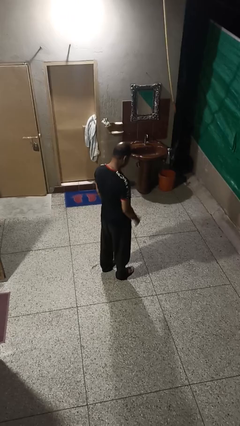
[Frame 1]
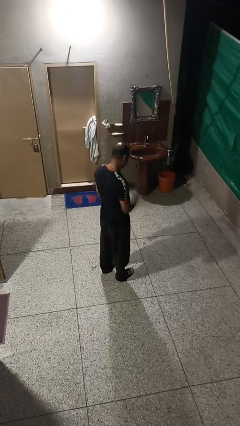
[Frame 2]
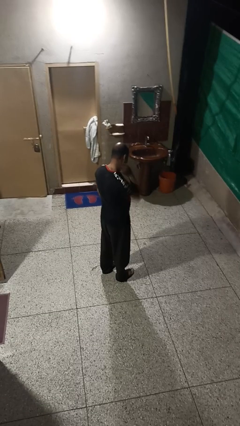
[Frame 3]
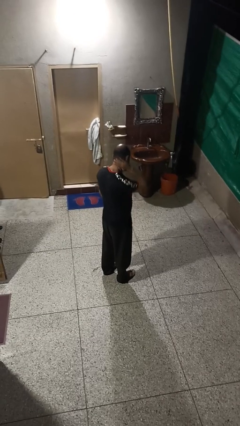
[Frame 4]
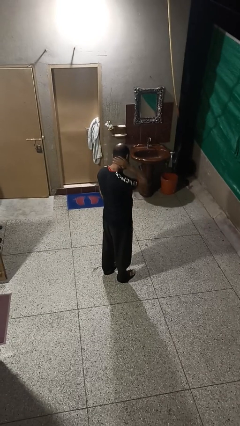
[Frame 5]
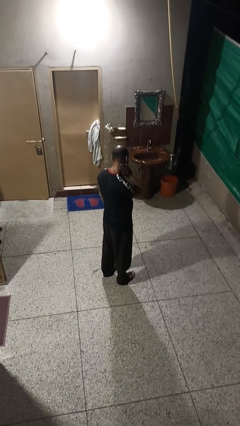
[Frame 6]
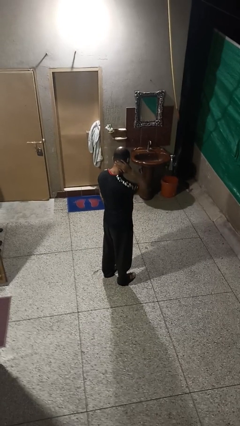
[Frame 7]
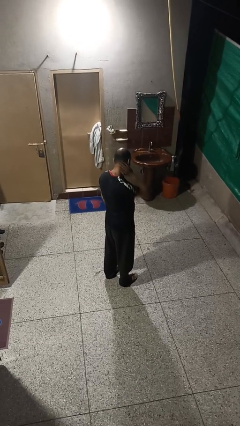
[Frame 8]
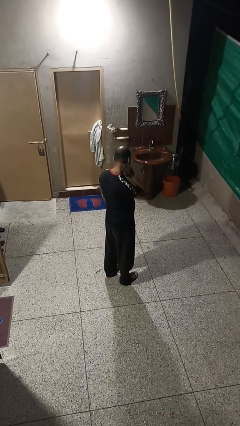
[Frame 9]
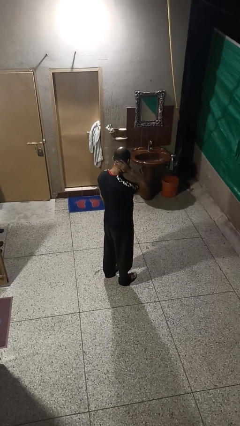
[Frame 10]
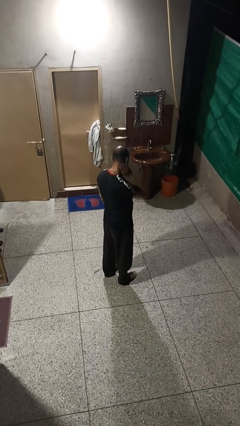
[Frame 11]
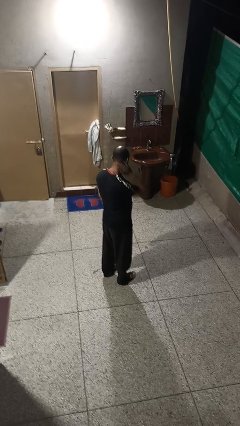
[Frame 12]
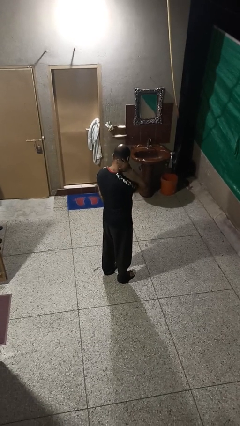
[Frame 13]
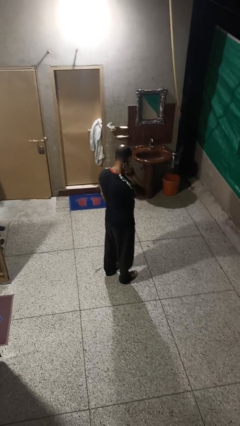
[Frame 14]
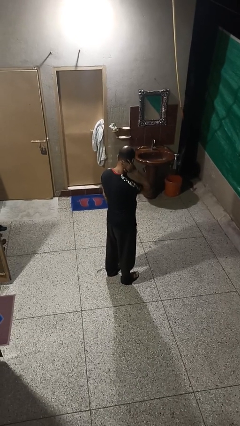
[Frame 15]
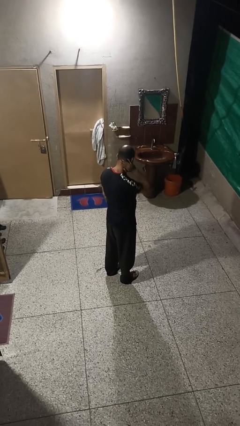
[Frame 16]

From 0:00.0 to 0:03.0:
person rubs neck

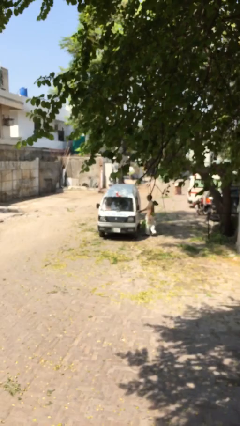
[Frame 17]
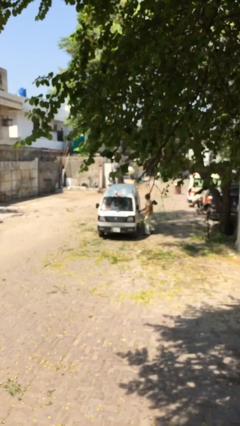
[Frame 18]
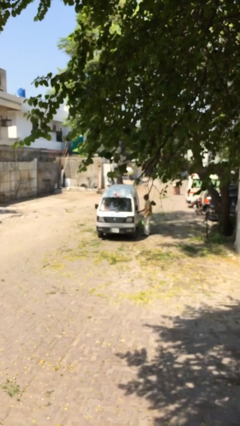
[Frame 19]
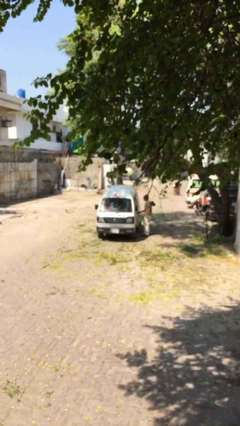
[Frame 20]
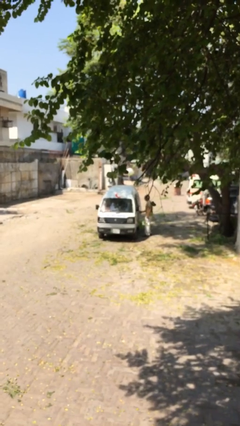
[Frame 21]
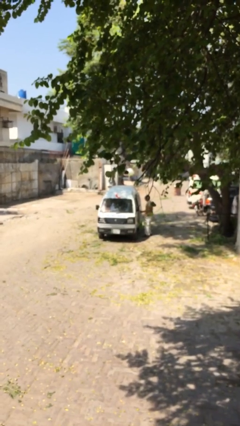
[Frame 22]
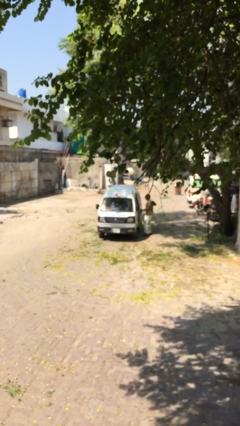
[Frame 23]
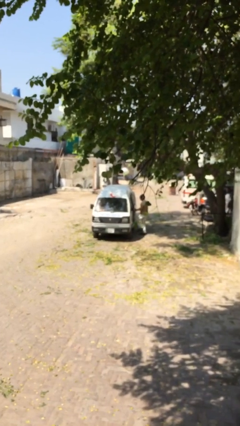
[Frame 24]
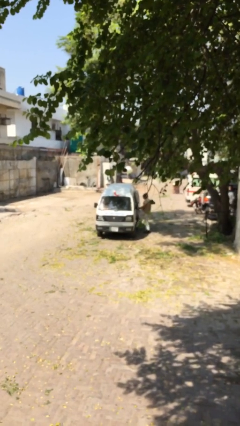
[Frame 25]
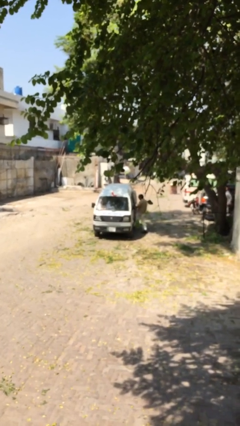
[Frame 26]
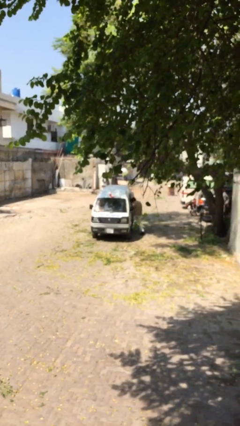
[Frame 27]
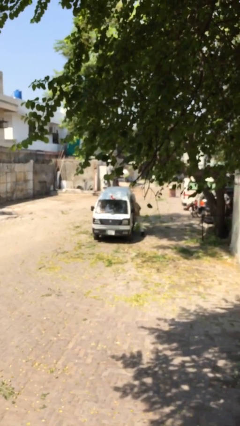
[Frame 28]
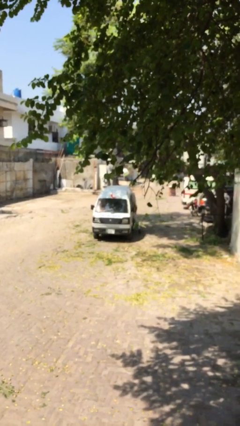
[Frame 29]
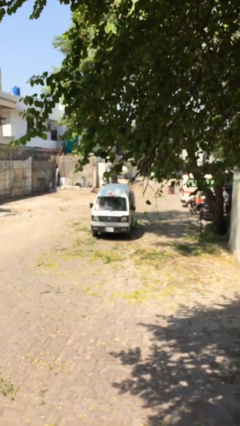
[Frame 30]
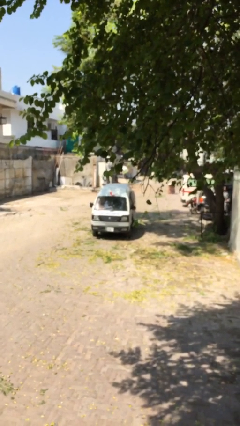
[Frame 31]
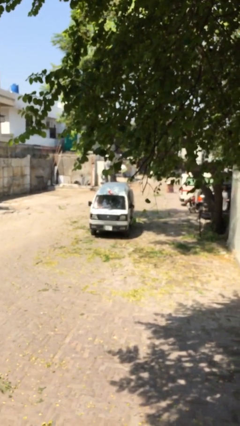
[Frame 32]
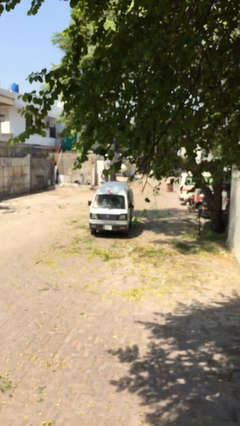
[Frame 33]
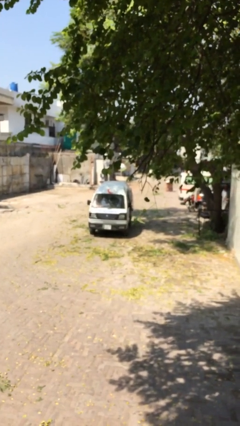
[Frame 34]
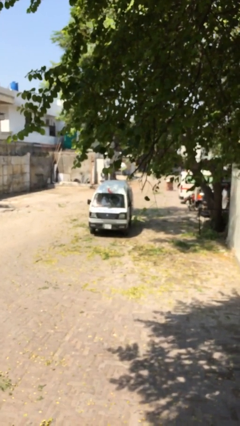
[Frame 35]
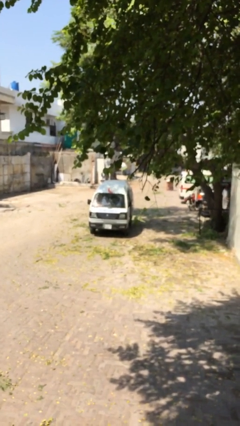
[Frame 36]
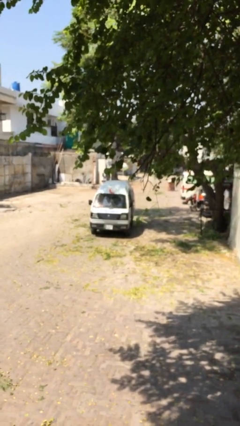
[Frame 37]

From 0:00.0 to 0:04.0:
car picks up person

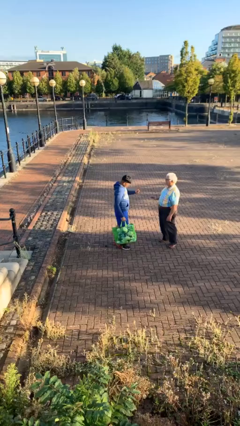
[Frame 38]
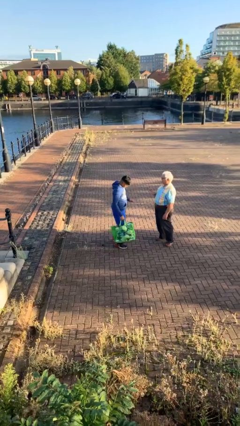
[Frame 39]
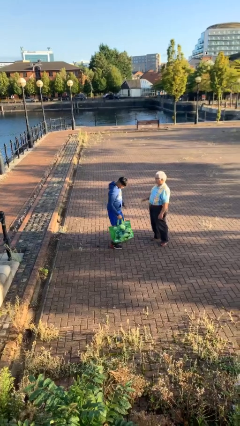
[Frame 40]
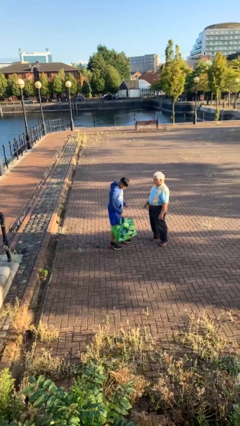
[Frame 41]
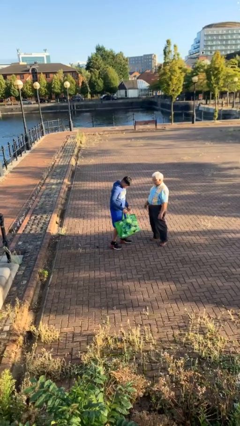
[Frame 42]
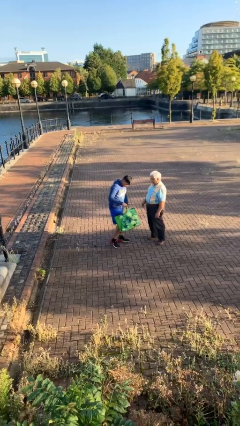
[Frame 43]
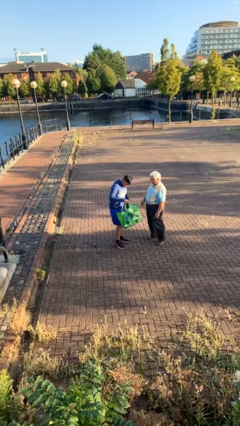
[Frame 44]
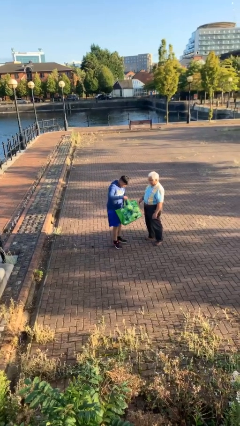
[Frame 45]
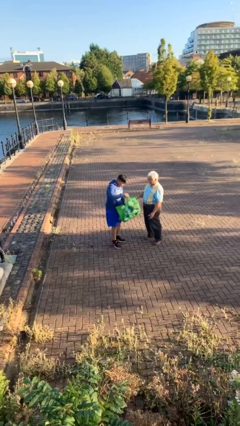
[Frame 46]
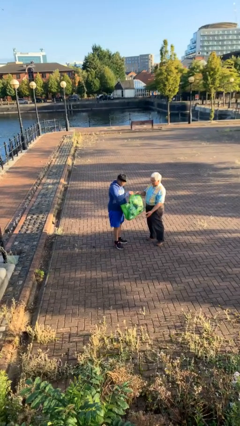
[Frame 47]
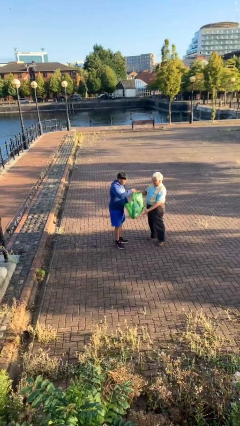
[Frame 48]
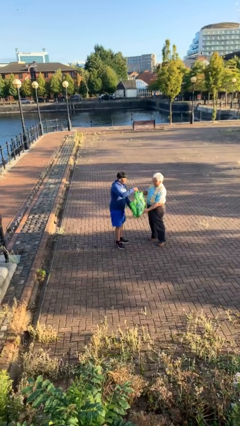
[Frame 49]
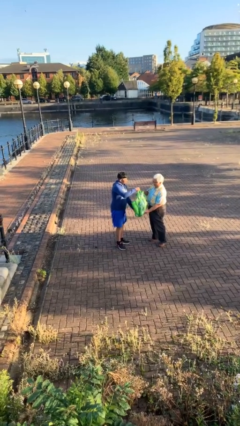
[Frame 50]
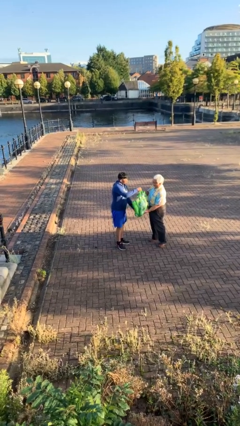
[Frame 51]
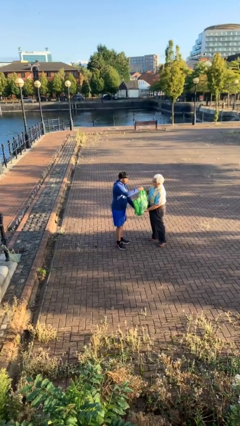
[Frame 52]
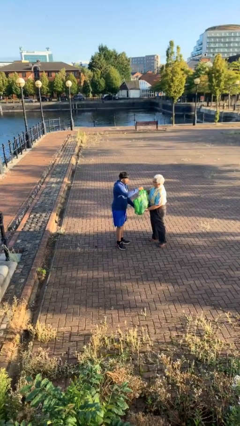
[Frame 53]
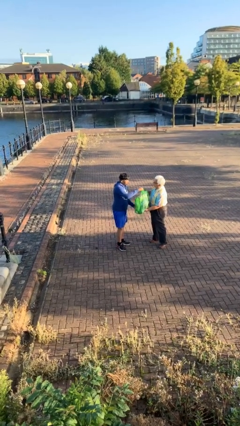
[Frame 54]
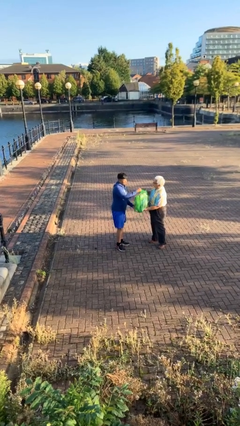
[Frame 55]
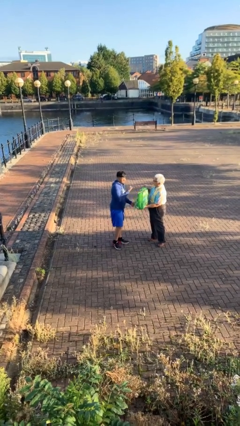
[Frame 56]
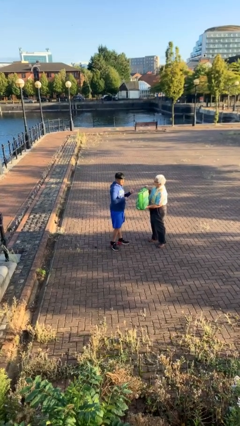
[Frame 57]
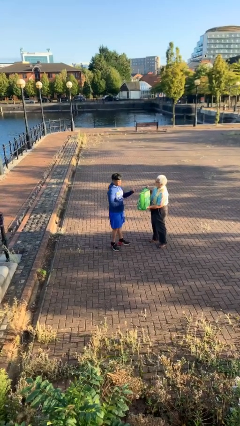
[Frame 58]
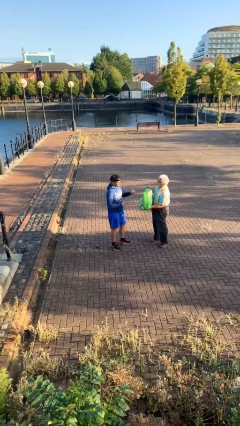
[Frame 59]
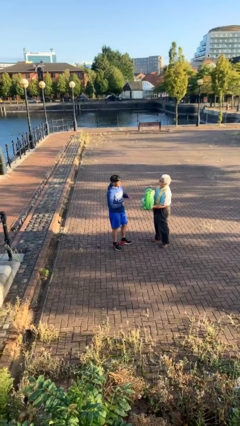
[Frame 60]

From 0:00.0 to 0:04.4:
person transfers object to person

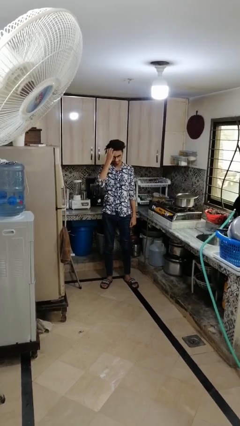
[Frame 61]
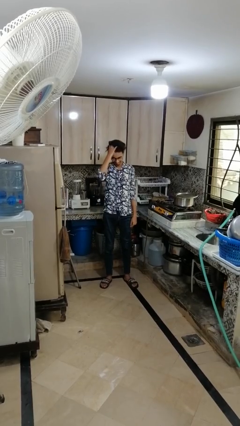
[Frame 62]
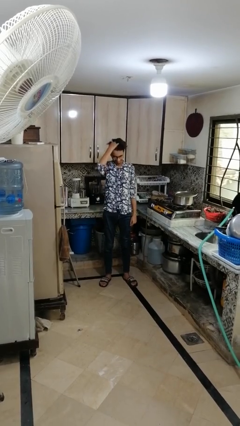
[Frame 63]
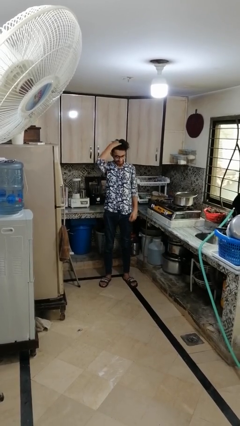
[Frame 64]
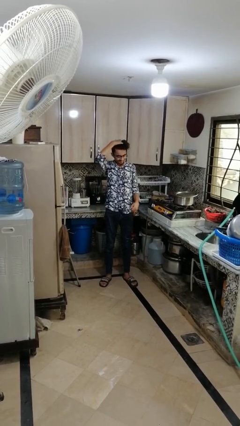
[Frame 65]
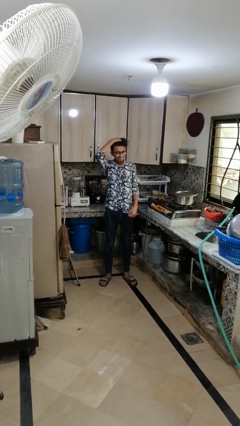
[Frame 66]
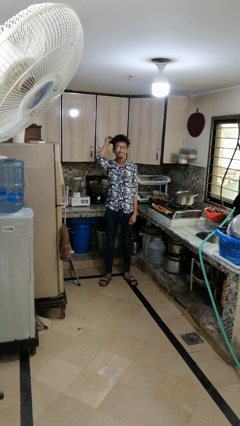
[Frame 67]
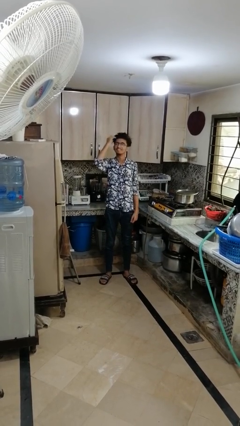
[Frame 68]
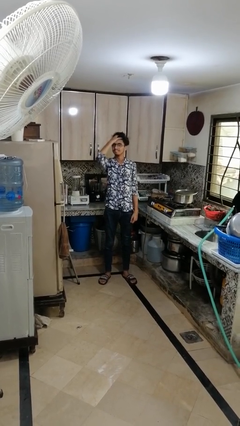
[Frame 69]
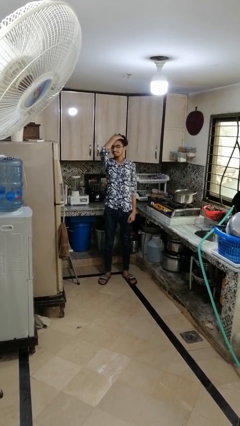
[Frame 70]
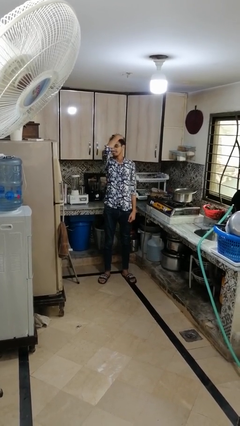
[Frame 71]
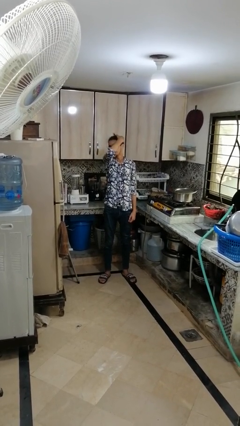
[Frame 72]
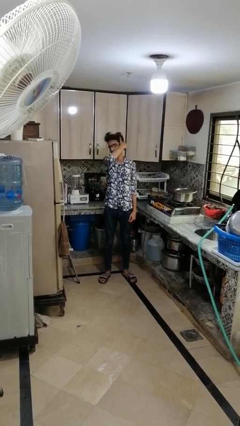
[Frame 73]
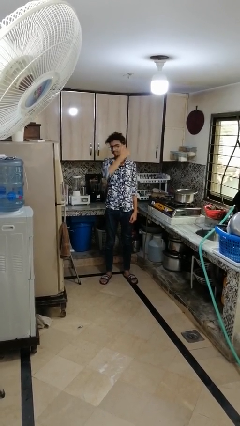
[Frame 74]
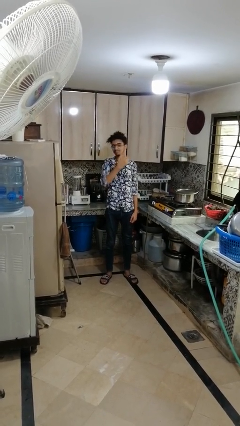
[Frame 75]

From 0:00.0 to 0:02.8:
person strokes hair

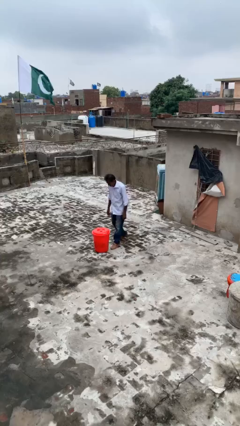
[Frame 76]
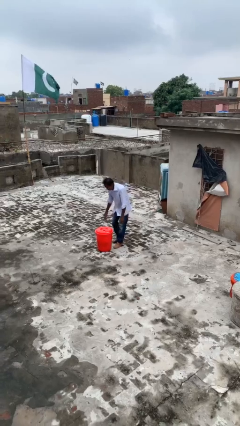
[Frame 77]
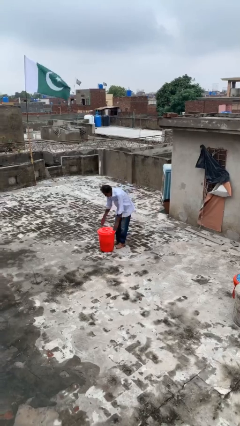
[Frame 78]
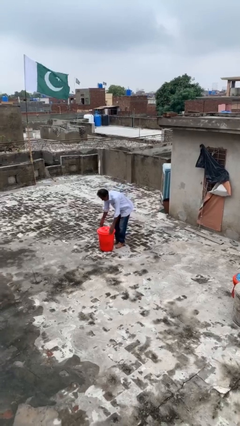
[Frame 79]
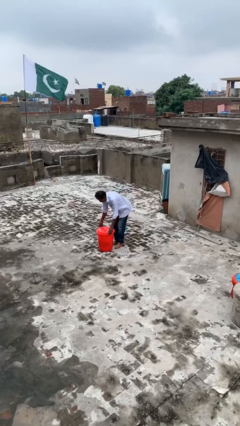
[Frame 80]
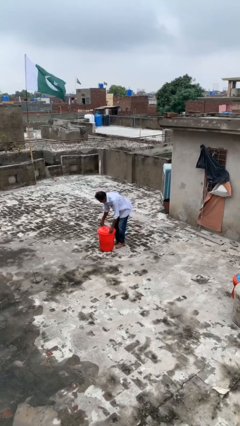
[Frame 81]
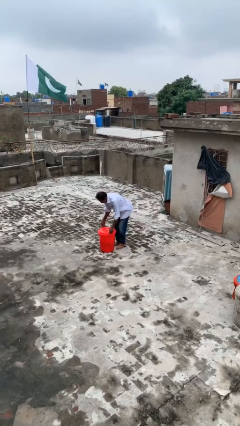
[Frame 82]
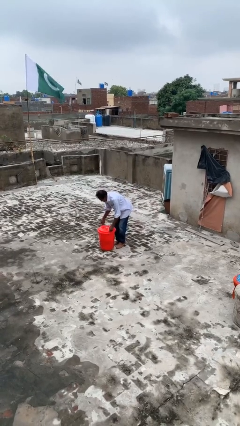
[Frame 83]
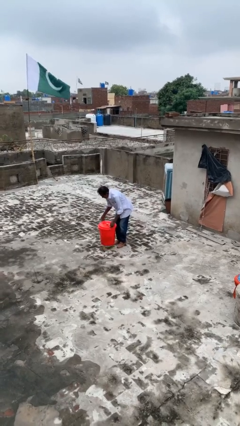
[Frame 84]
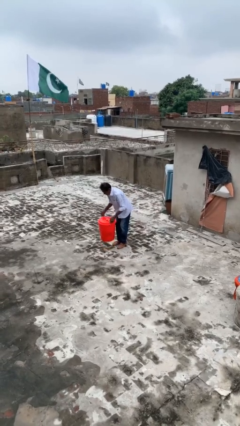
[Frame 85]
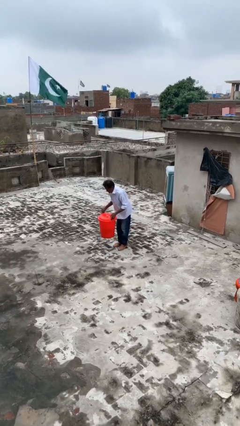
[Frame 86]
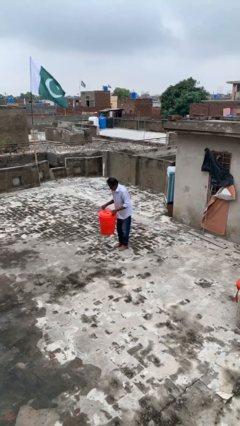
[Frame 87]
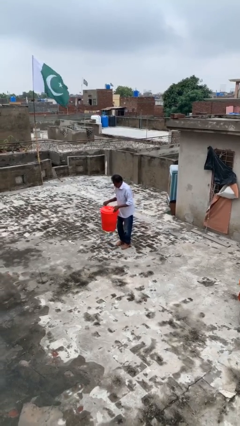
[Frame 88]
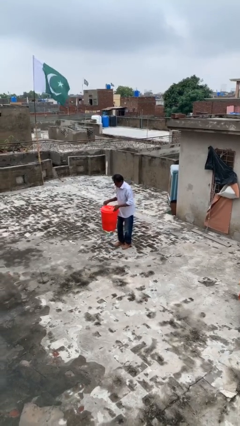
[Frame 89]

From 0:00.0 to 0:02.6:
person picks up object from floor

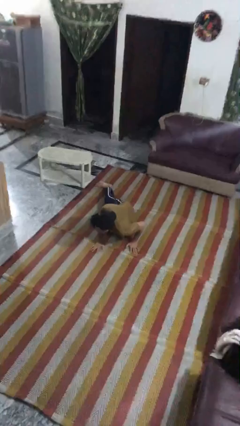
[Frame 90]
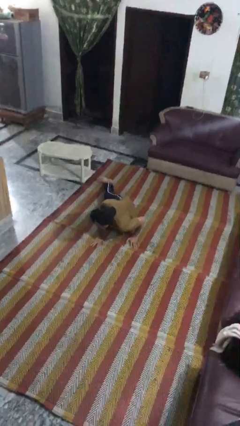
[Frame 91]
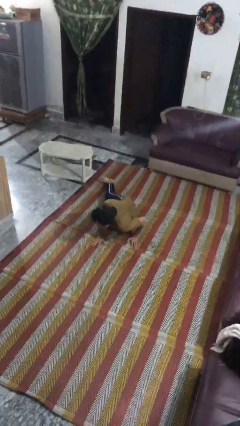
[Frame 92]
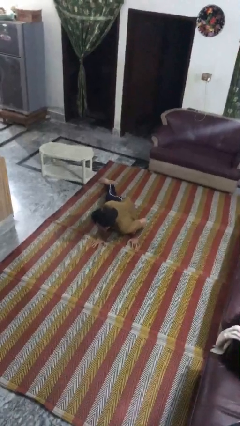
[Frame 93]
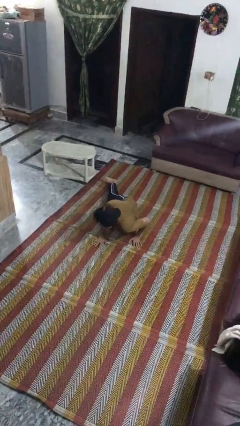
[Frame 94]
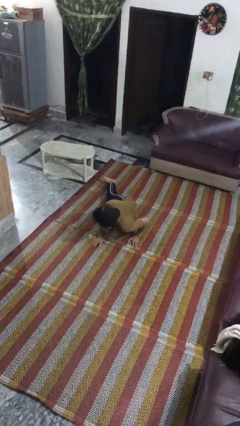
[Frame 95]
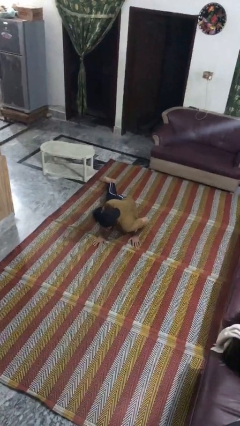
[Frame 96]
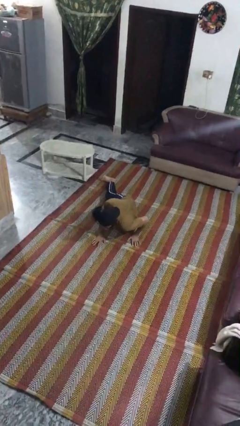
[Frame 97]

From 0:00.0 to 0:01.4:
person lies down on floor
